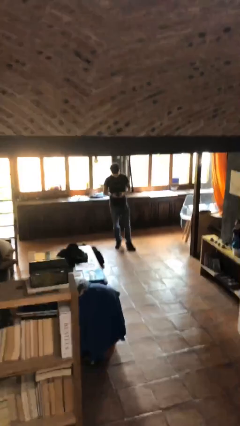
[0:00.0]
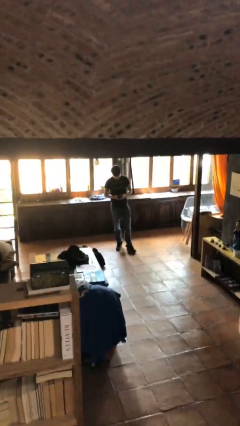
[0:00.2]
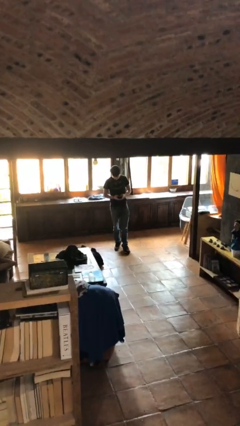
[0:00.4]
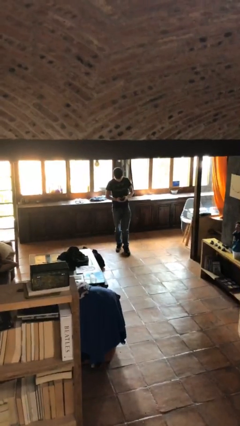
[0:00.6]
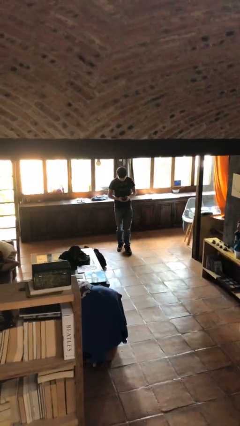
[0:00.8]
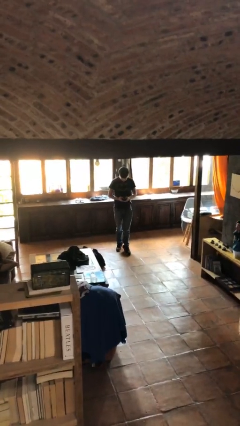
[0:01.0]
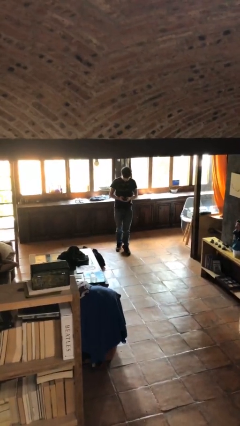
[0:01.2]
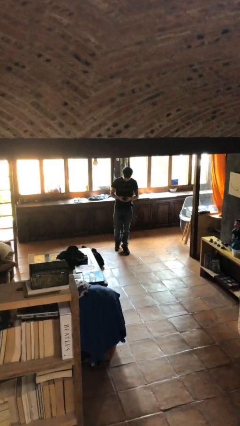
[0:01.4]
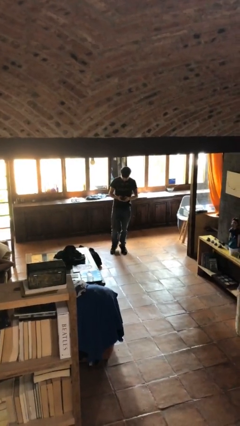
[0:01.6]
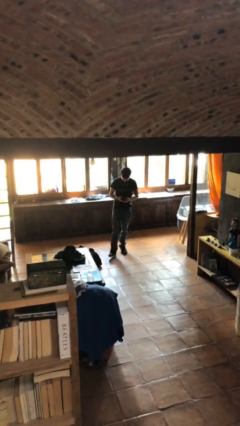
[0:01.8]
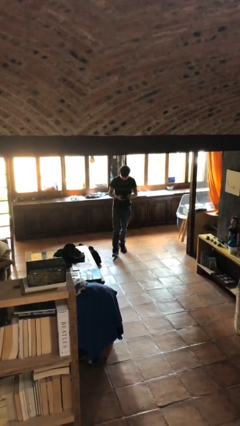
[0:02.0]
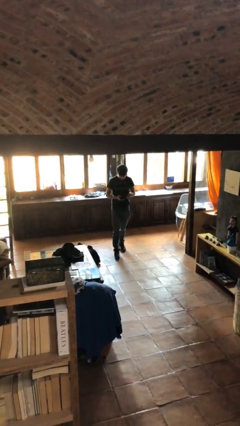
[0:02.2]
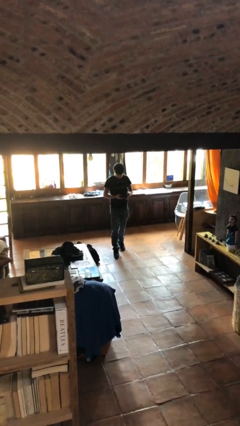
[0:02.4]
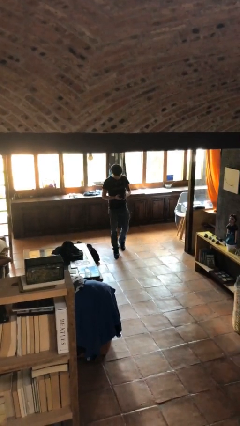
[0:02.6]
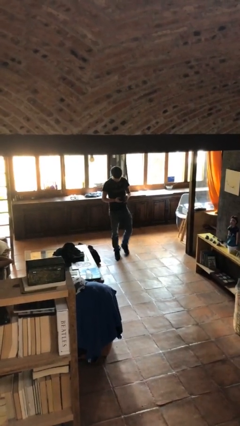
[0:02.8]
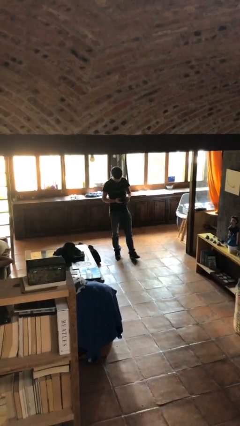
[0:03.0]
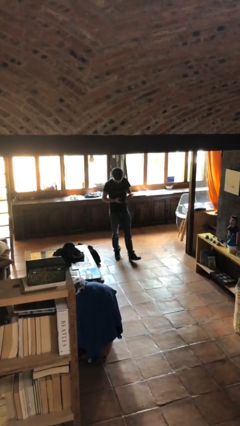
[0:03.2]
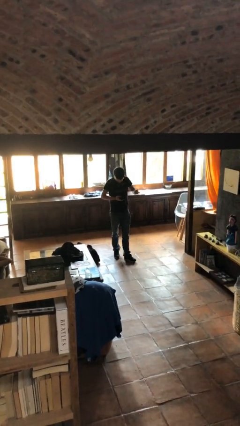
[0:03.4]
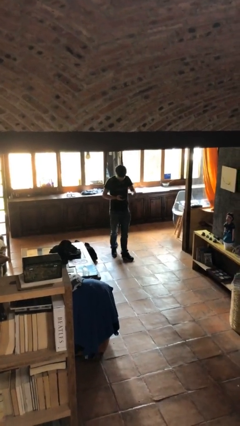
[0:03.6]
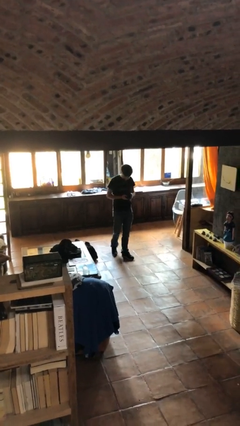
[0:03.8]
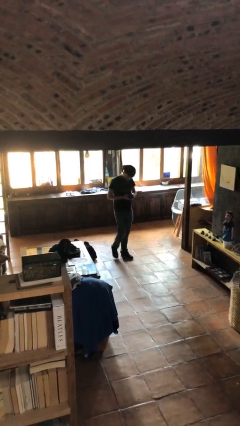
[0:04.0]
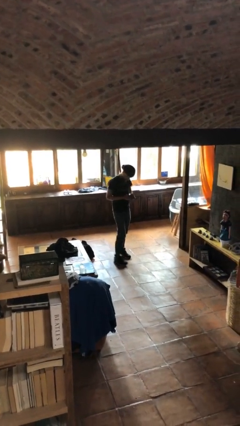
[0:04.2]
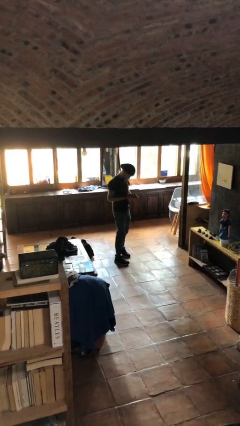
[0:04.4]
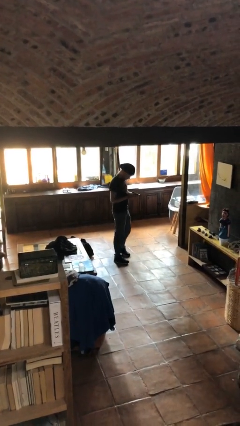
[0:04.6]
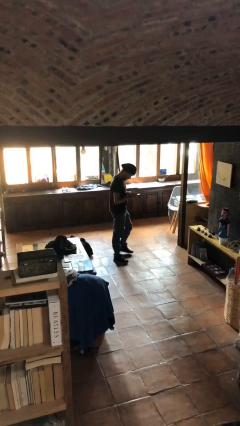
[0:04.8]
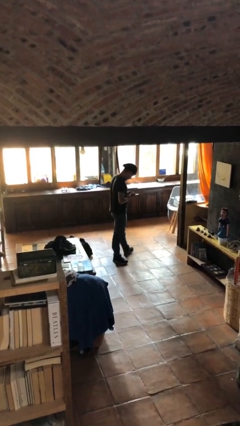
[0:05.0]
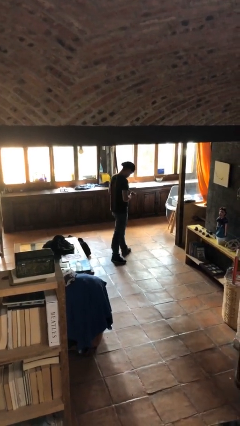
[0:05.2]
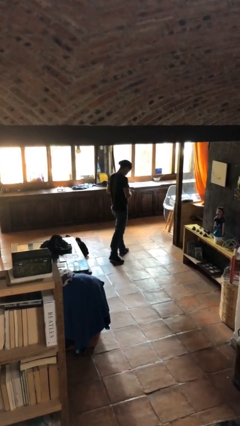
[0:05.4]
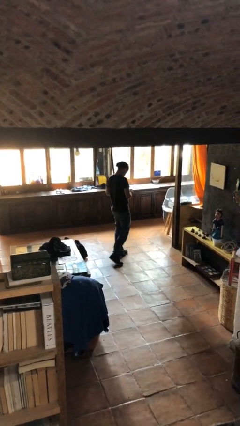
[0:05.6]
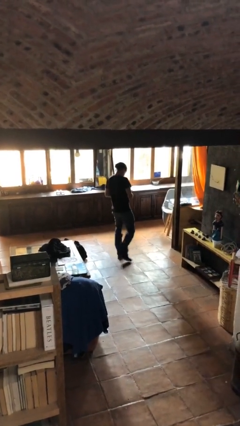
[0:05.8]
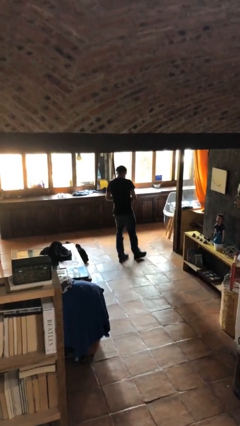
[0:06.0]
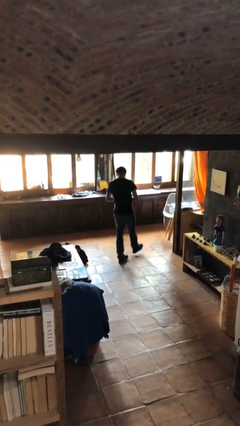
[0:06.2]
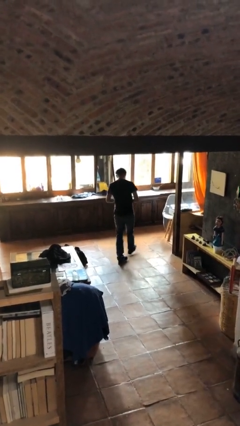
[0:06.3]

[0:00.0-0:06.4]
person texts on phone

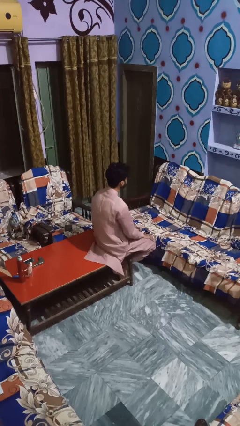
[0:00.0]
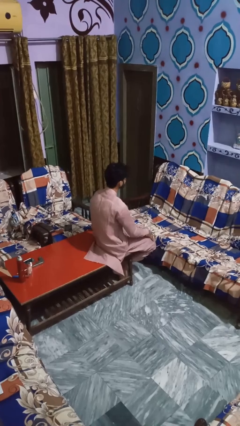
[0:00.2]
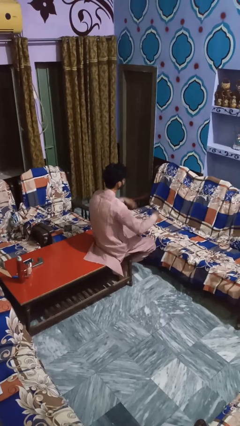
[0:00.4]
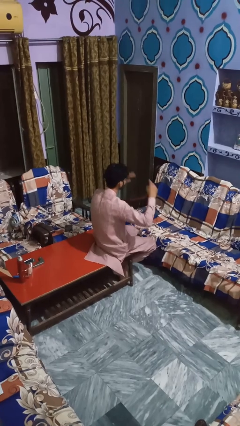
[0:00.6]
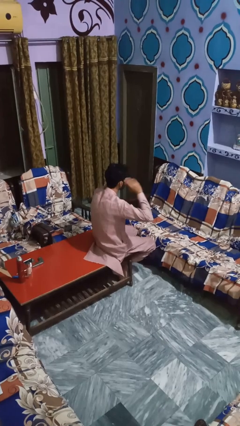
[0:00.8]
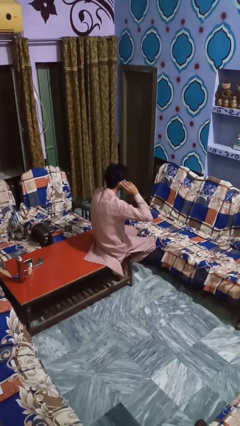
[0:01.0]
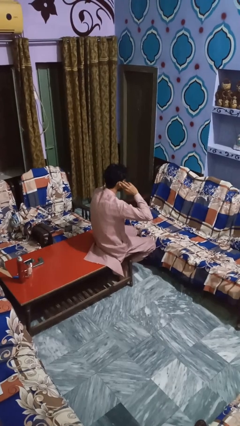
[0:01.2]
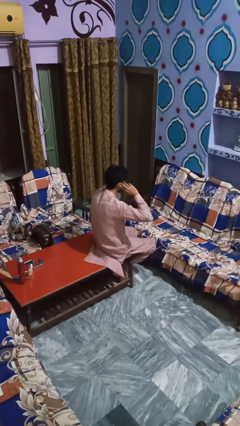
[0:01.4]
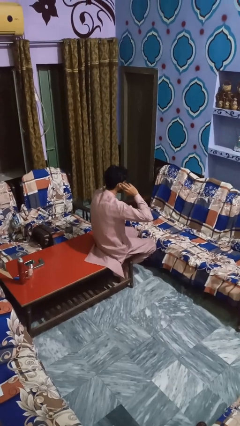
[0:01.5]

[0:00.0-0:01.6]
person puts fingers in ear

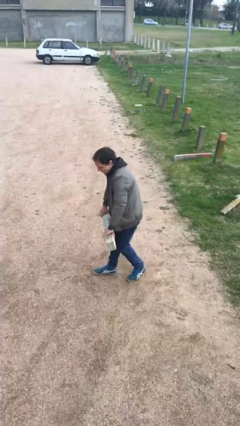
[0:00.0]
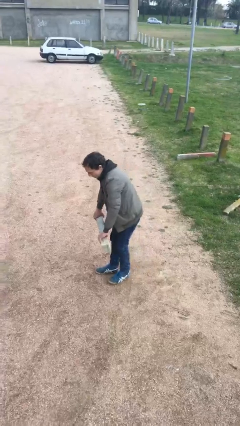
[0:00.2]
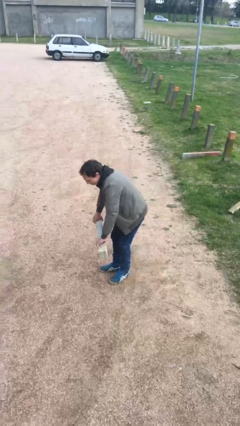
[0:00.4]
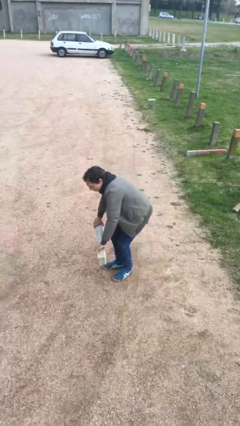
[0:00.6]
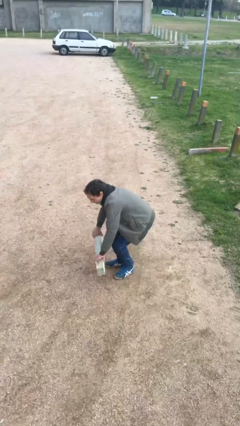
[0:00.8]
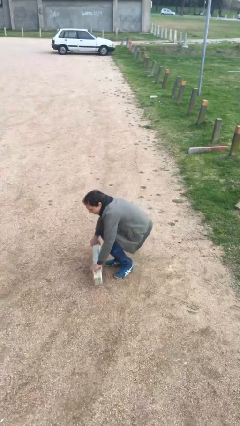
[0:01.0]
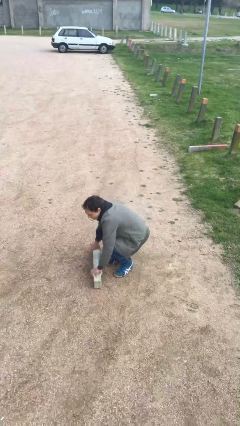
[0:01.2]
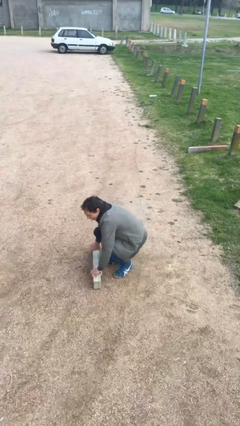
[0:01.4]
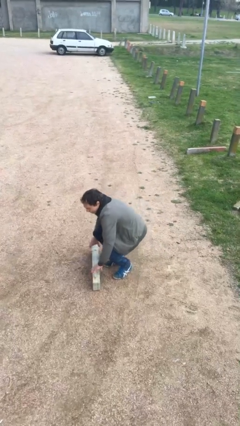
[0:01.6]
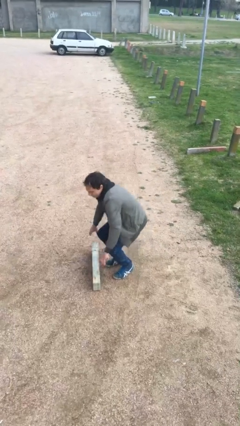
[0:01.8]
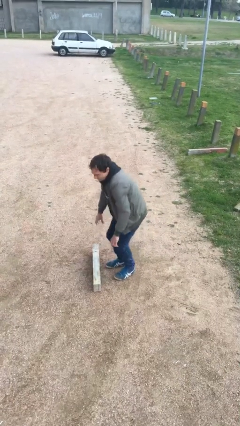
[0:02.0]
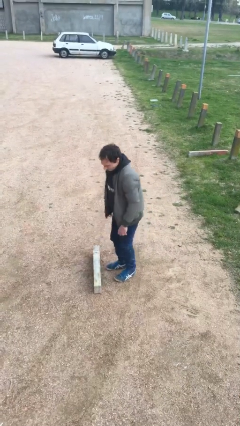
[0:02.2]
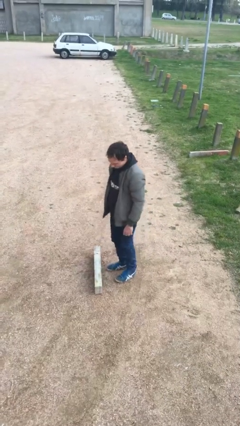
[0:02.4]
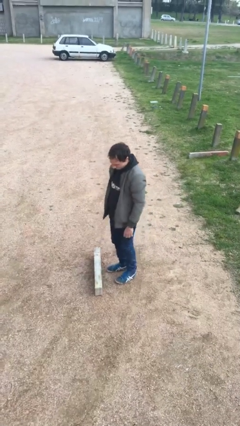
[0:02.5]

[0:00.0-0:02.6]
person puts down object on floor

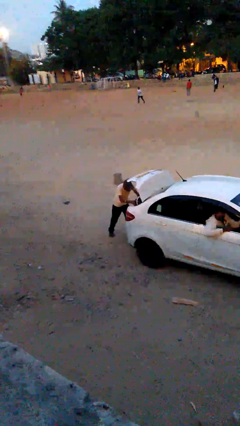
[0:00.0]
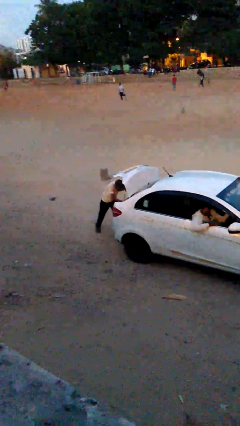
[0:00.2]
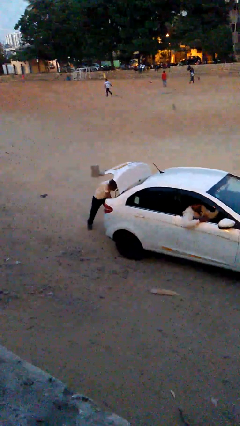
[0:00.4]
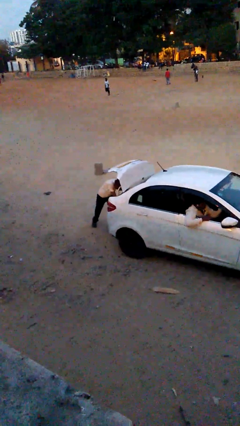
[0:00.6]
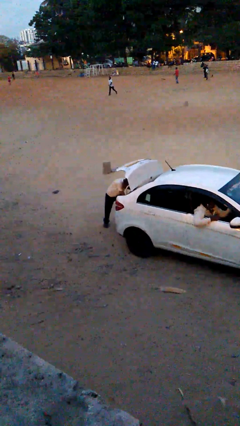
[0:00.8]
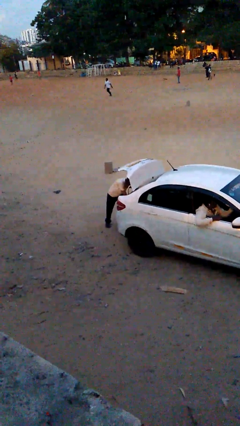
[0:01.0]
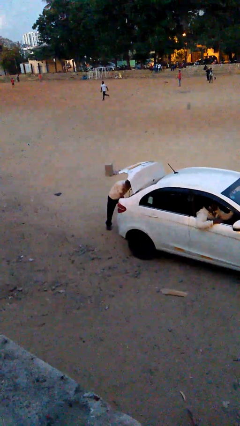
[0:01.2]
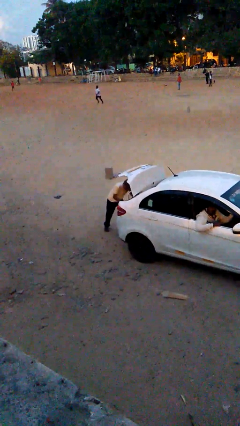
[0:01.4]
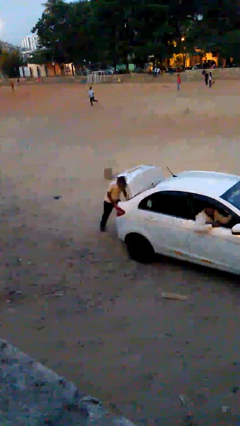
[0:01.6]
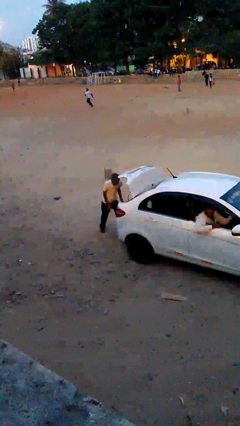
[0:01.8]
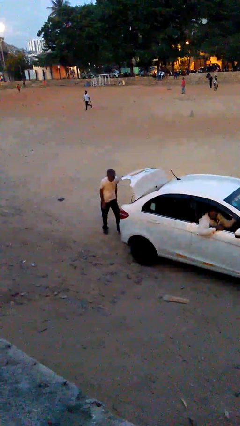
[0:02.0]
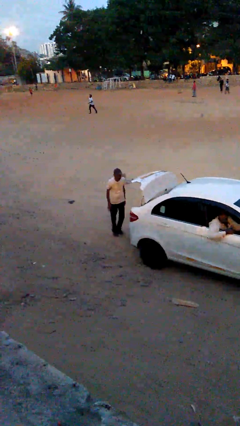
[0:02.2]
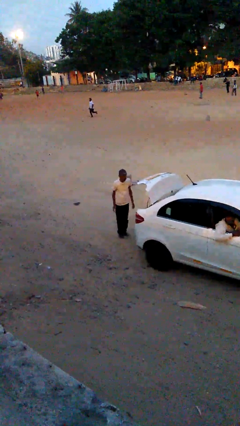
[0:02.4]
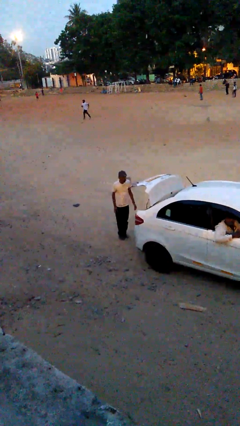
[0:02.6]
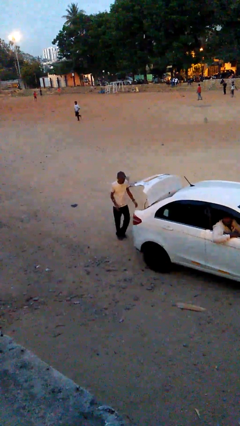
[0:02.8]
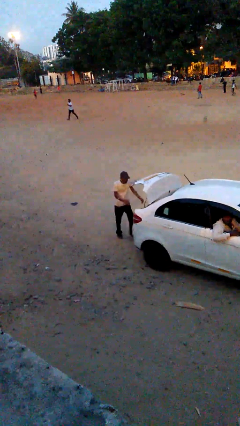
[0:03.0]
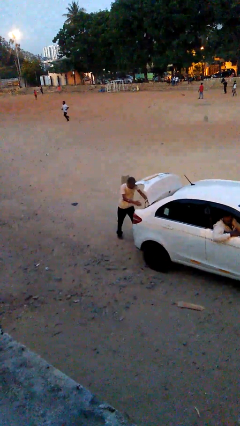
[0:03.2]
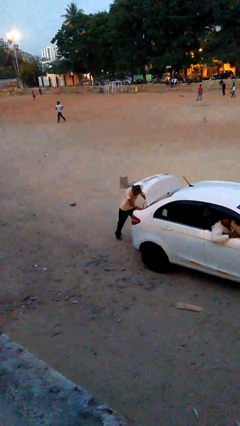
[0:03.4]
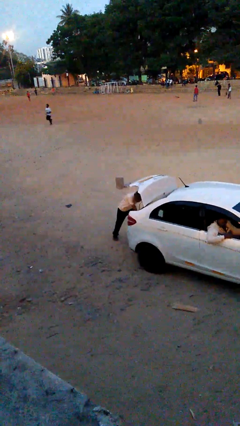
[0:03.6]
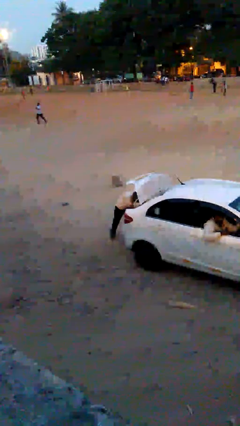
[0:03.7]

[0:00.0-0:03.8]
person loads car

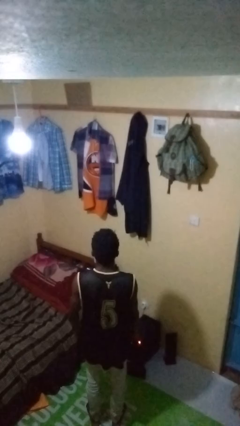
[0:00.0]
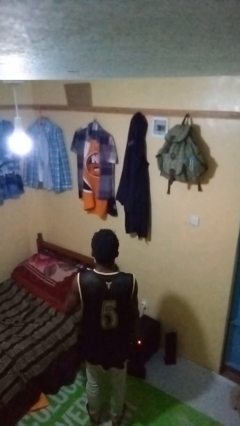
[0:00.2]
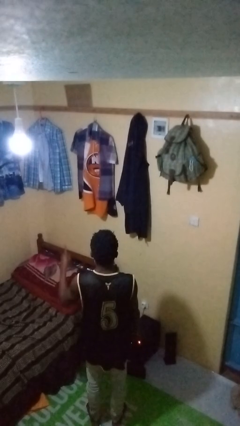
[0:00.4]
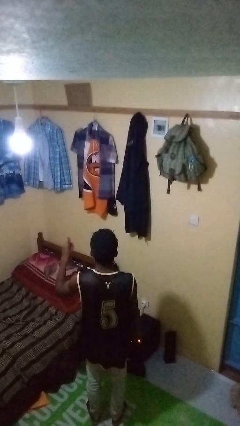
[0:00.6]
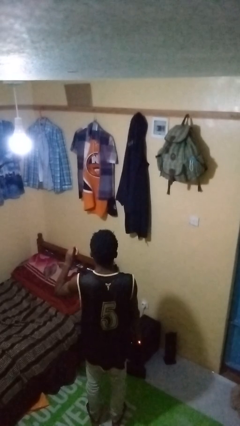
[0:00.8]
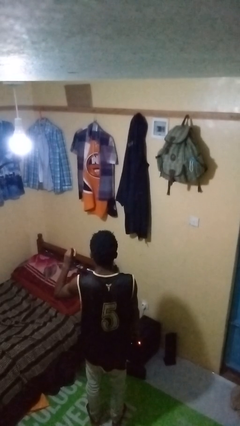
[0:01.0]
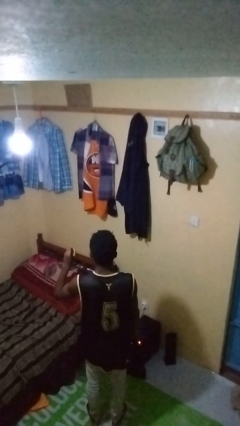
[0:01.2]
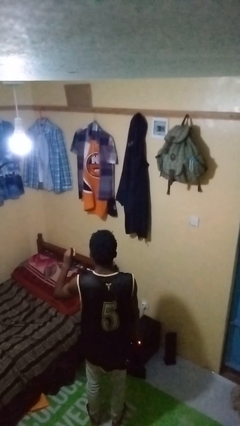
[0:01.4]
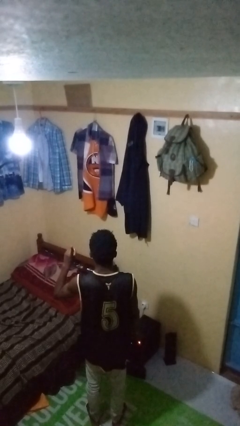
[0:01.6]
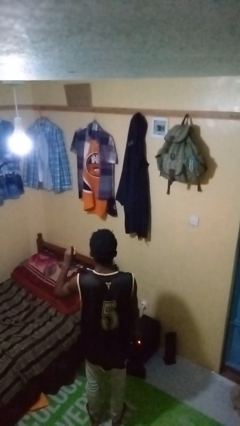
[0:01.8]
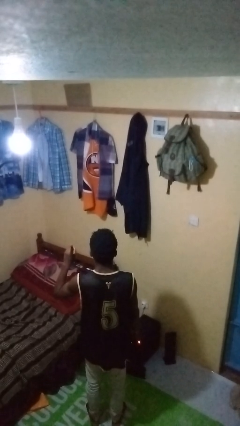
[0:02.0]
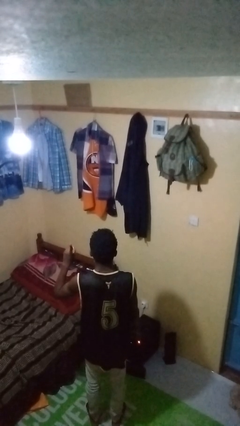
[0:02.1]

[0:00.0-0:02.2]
person gestures number one

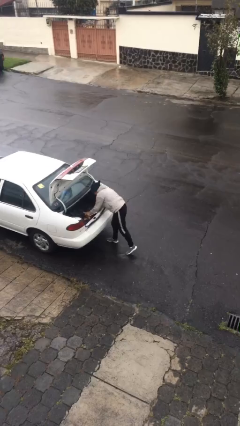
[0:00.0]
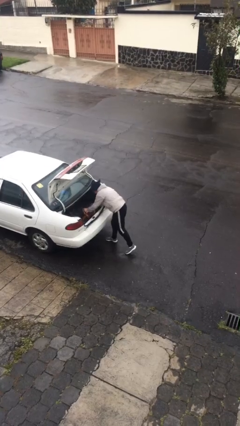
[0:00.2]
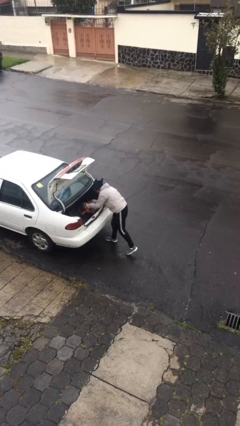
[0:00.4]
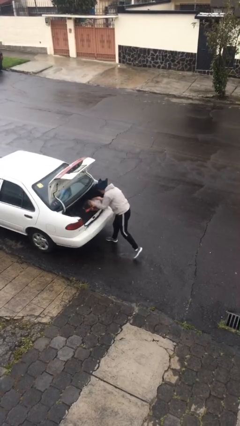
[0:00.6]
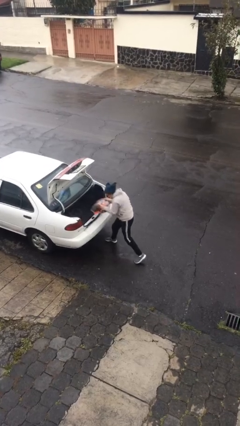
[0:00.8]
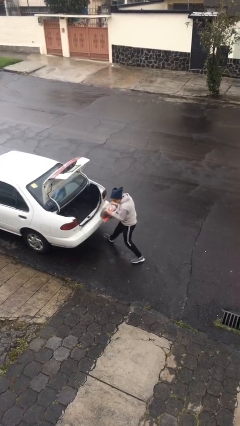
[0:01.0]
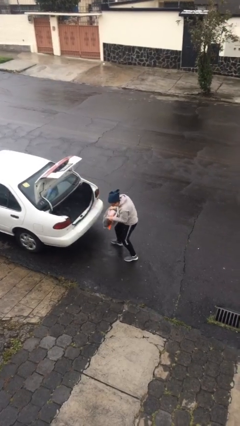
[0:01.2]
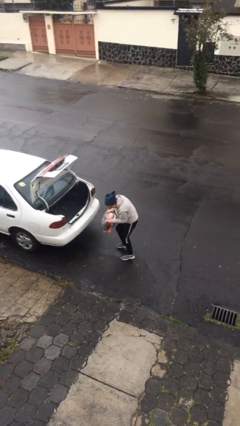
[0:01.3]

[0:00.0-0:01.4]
person unloads car
